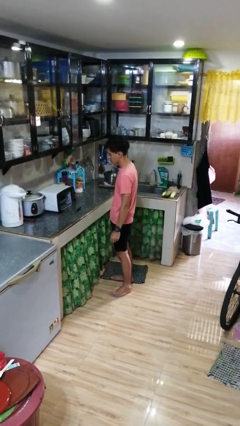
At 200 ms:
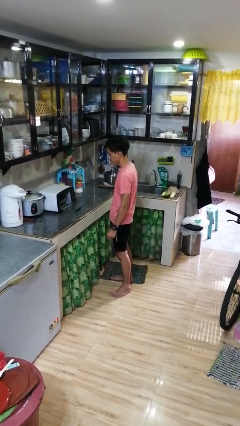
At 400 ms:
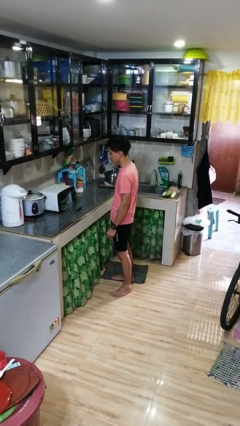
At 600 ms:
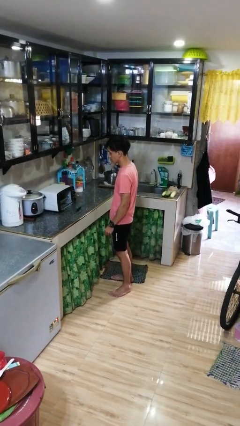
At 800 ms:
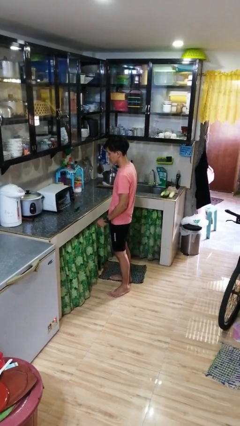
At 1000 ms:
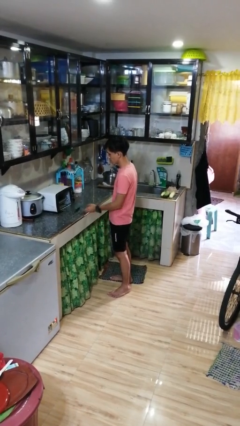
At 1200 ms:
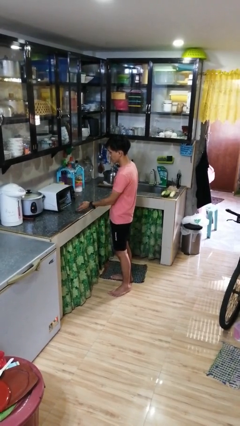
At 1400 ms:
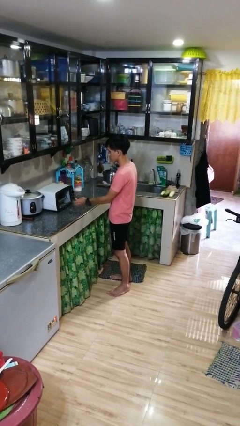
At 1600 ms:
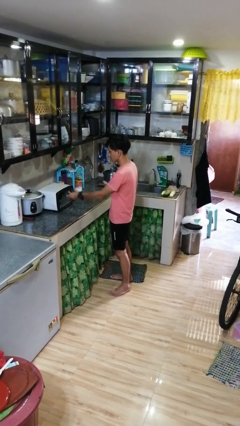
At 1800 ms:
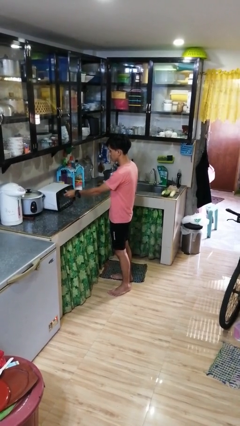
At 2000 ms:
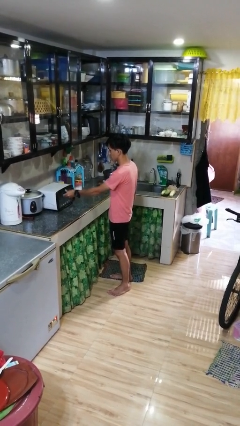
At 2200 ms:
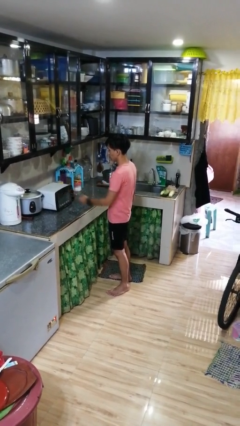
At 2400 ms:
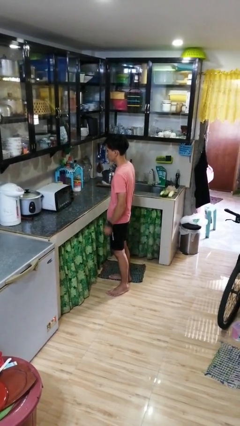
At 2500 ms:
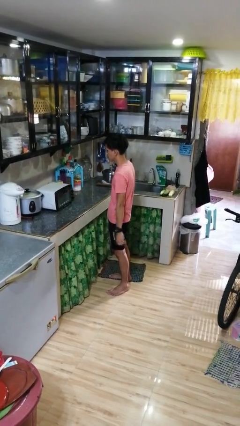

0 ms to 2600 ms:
person closes microwave

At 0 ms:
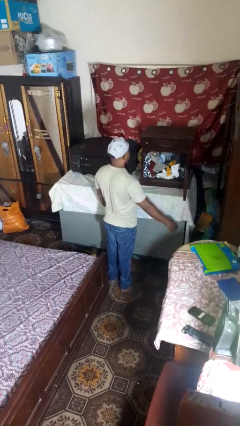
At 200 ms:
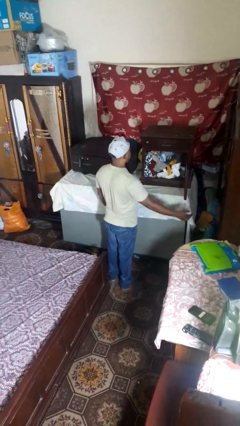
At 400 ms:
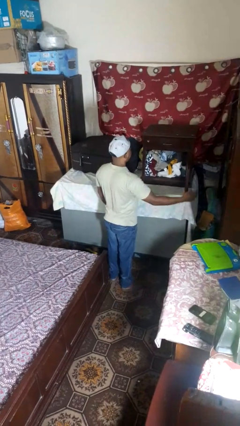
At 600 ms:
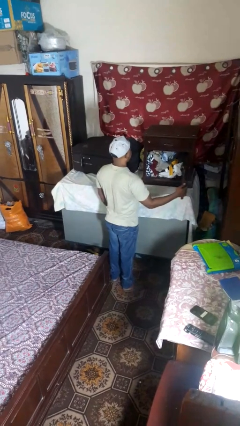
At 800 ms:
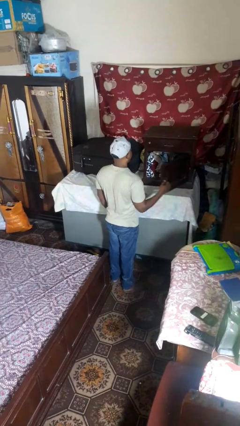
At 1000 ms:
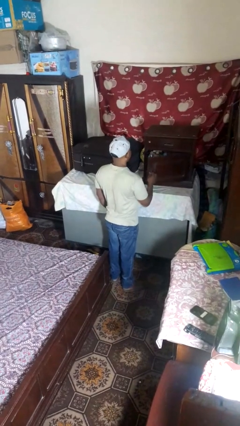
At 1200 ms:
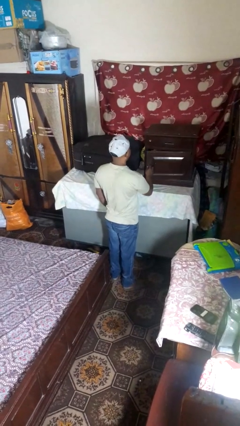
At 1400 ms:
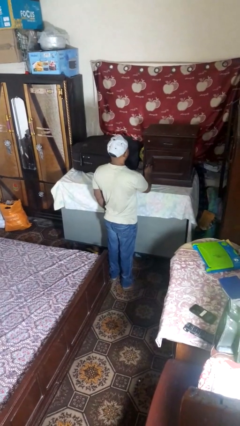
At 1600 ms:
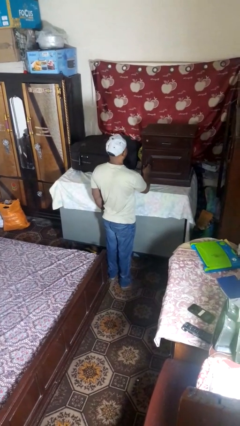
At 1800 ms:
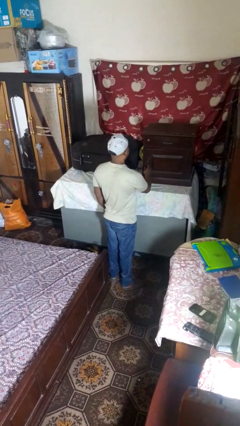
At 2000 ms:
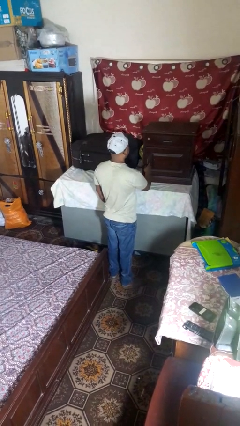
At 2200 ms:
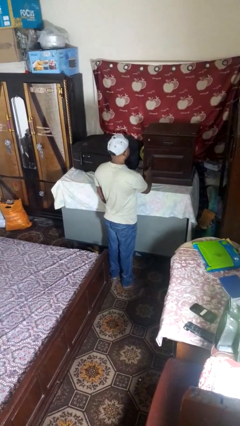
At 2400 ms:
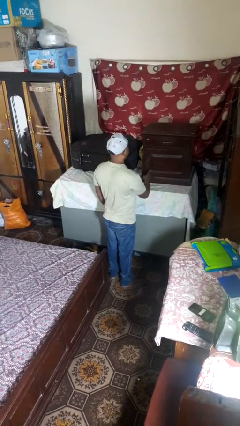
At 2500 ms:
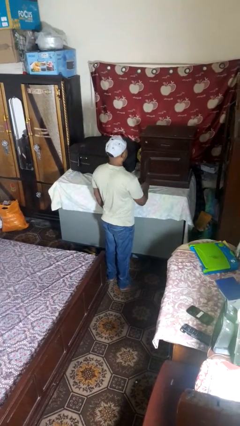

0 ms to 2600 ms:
person closes closet door

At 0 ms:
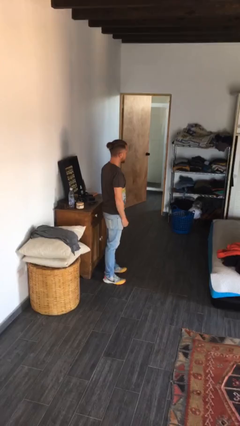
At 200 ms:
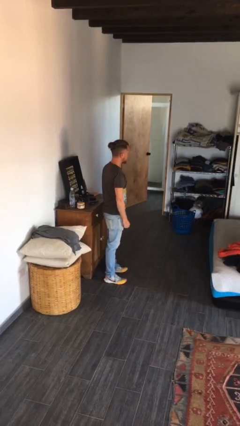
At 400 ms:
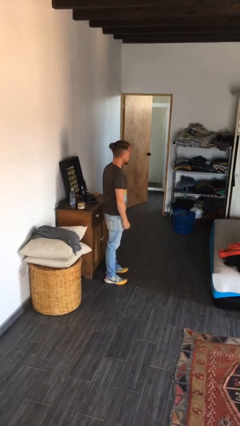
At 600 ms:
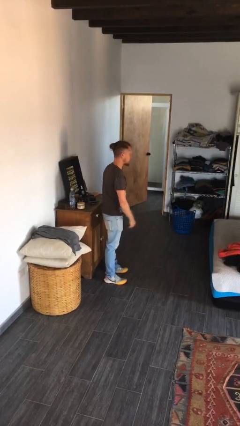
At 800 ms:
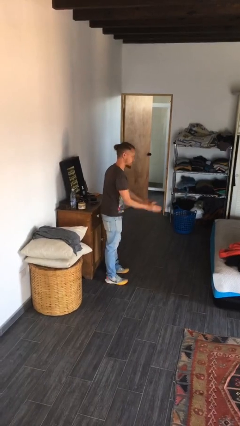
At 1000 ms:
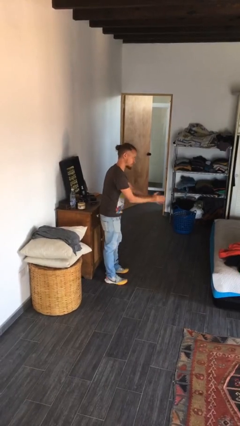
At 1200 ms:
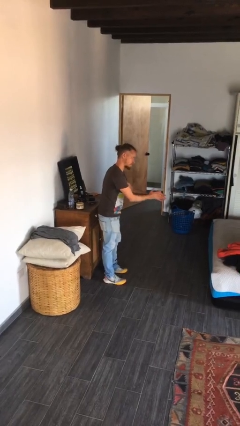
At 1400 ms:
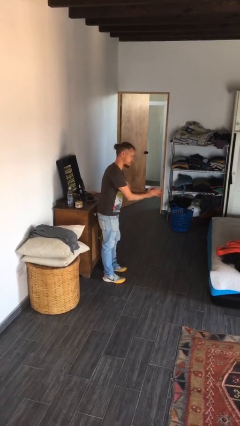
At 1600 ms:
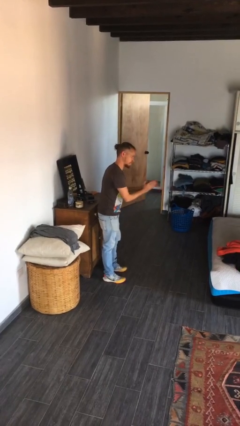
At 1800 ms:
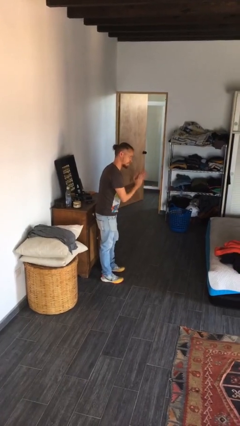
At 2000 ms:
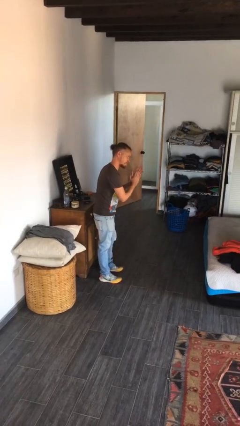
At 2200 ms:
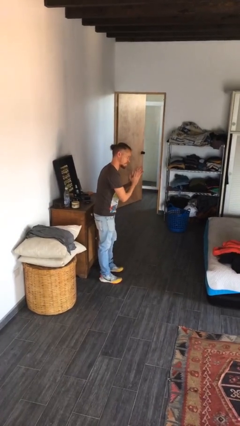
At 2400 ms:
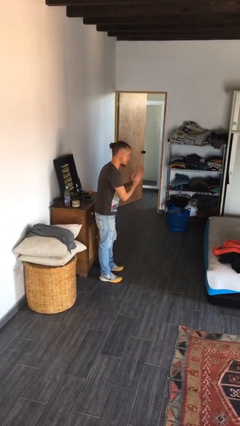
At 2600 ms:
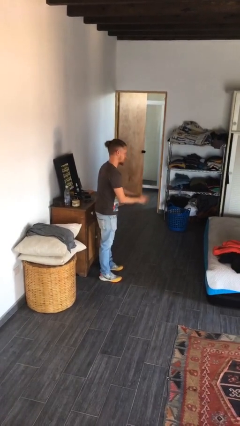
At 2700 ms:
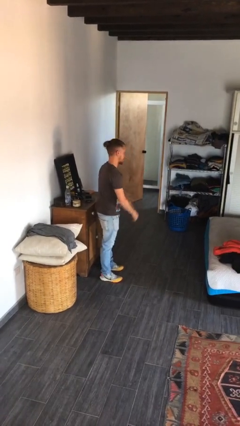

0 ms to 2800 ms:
person claps hands

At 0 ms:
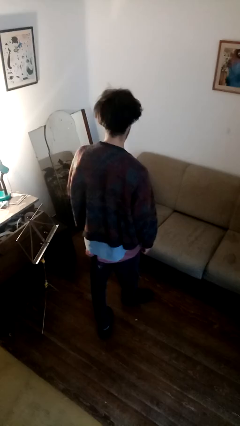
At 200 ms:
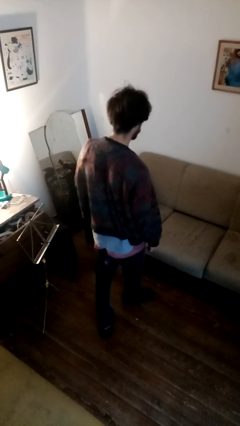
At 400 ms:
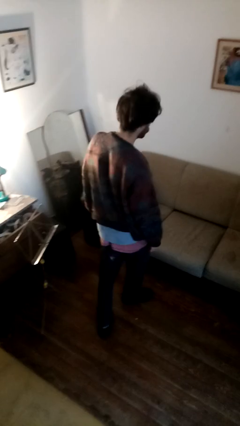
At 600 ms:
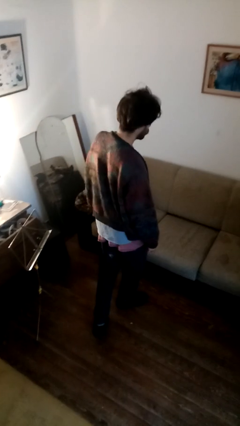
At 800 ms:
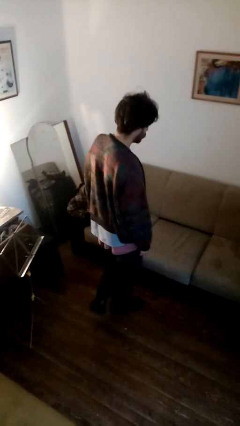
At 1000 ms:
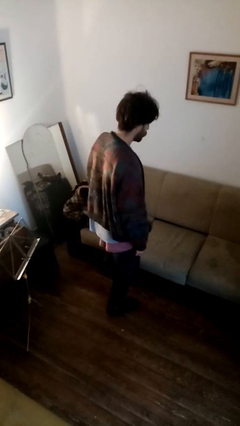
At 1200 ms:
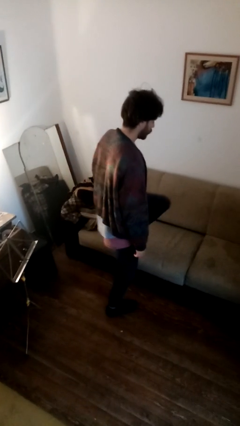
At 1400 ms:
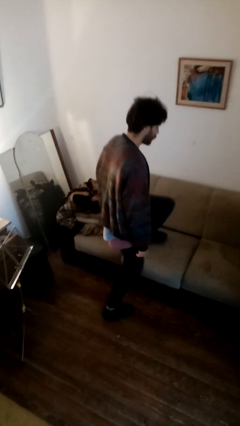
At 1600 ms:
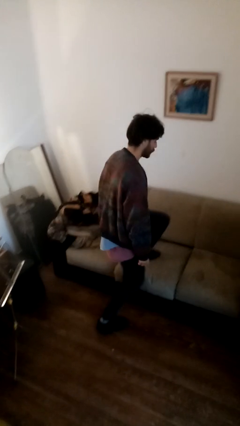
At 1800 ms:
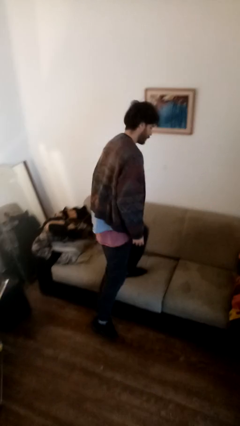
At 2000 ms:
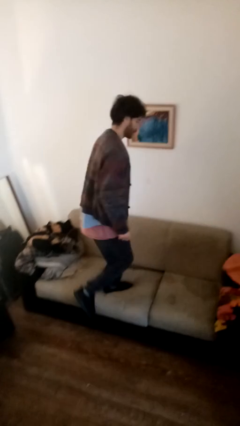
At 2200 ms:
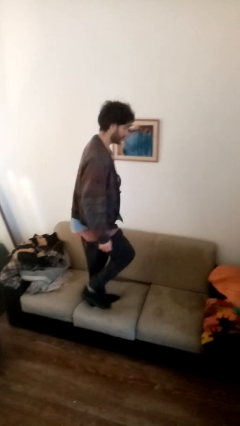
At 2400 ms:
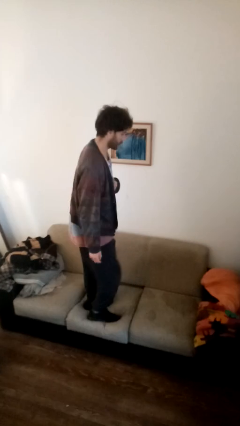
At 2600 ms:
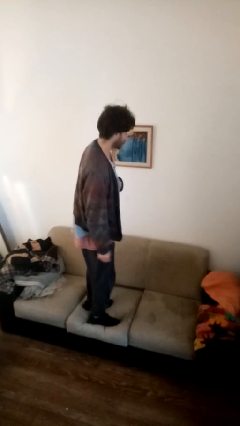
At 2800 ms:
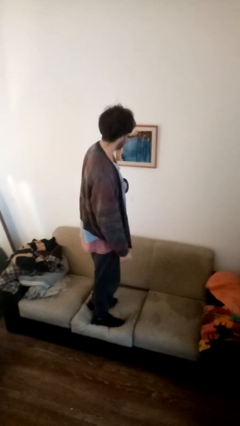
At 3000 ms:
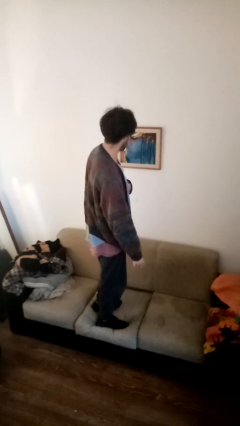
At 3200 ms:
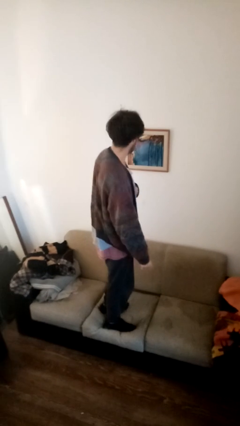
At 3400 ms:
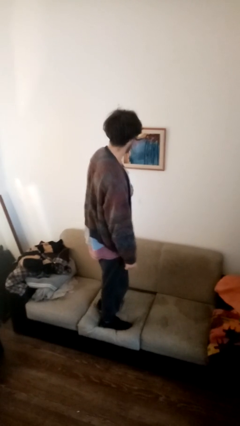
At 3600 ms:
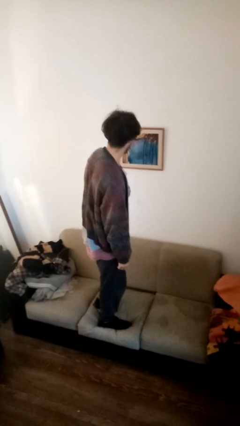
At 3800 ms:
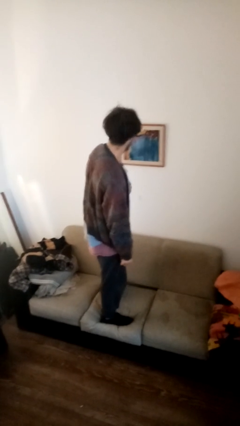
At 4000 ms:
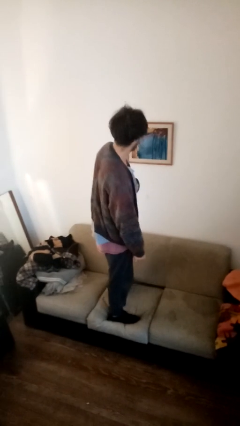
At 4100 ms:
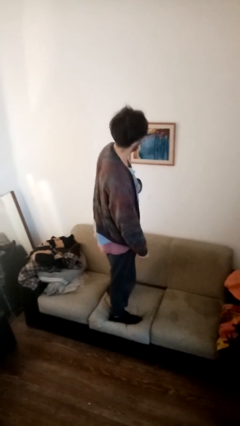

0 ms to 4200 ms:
person climbs on couch

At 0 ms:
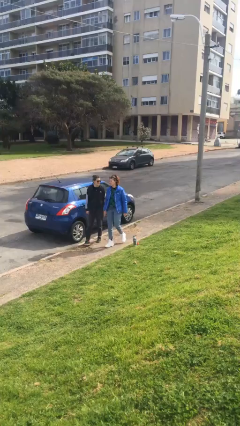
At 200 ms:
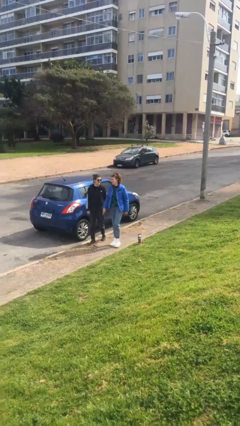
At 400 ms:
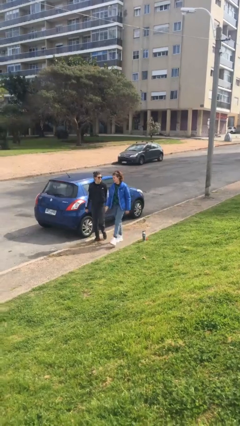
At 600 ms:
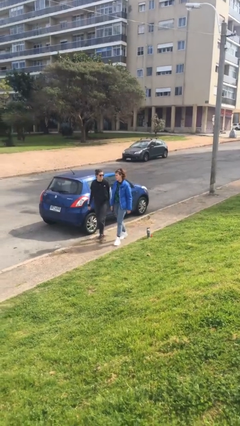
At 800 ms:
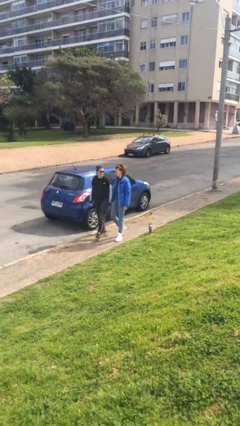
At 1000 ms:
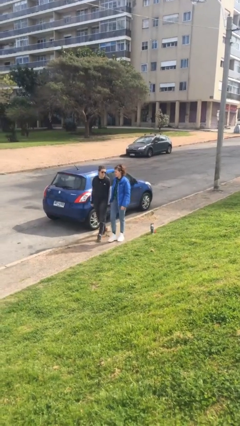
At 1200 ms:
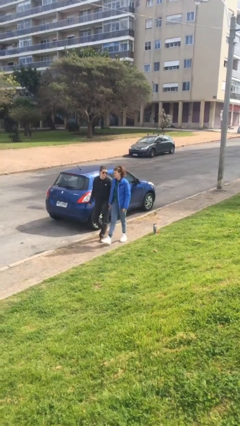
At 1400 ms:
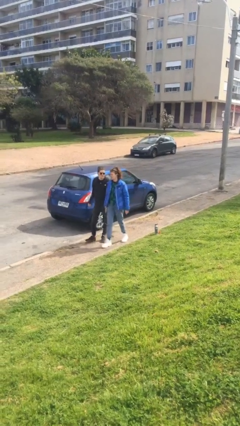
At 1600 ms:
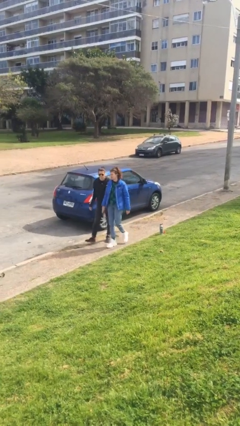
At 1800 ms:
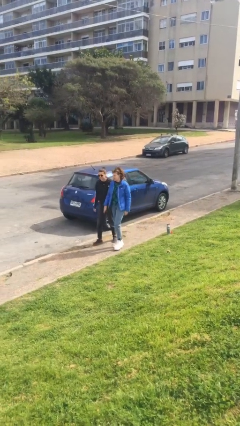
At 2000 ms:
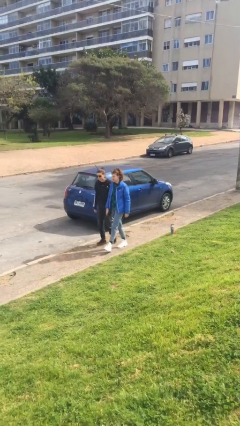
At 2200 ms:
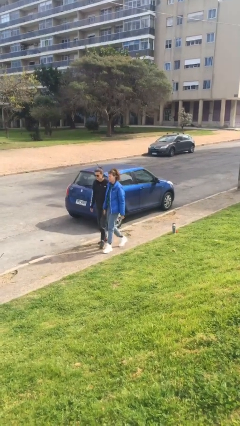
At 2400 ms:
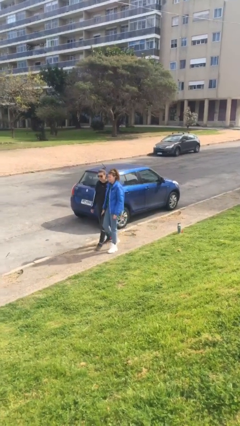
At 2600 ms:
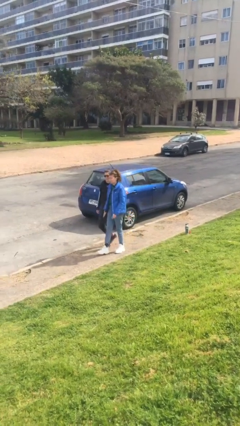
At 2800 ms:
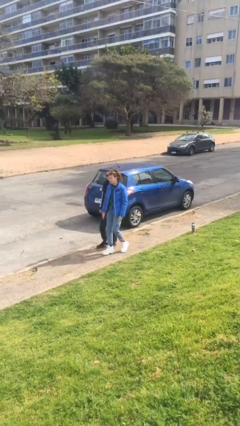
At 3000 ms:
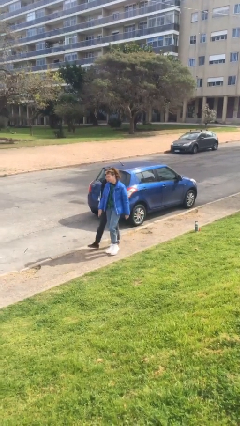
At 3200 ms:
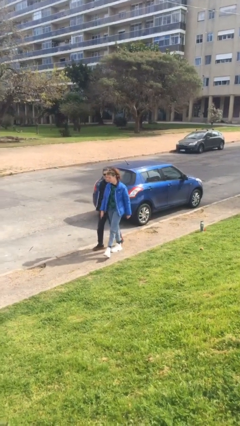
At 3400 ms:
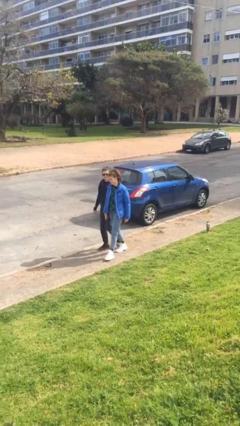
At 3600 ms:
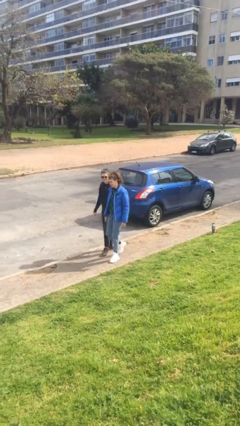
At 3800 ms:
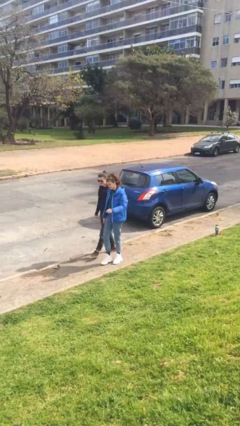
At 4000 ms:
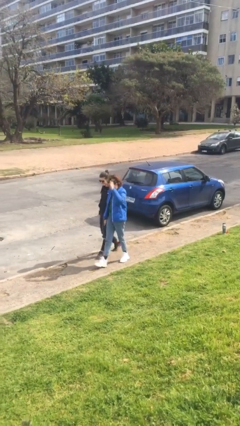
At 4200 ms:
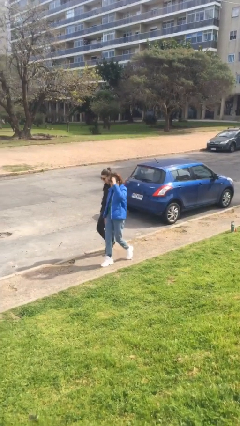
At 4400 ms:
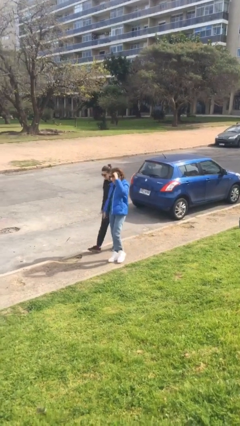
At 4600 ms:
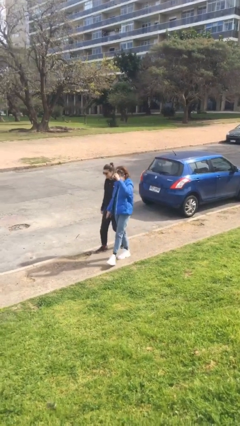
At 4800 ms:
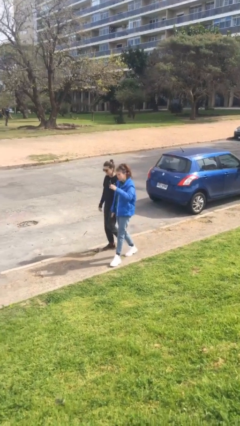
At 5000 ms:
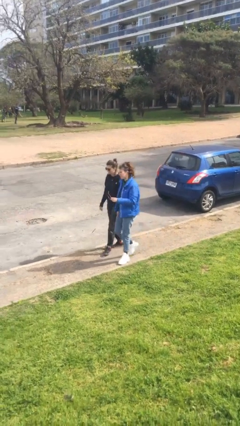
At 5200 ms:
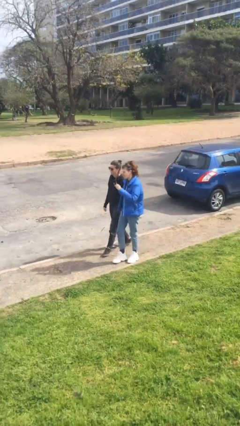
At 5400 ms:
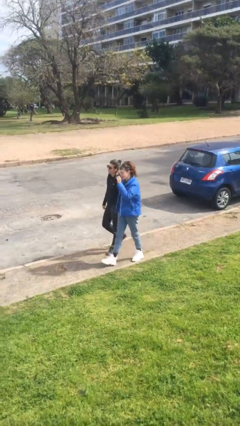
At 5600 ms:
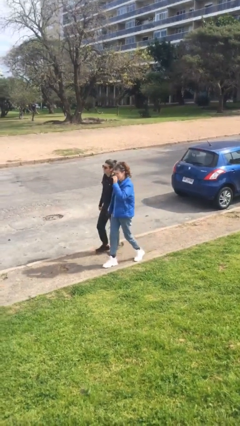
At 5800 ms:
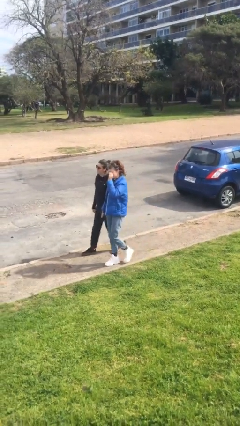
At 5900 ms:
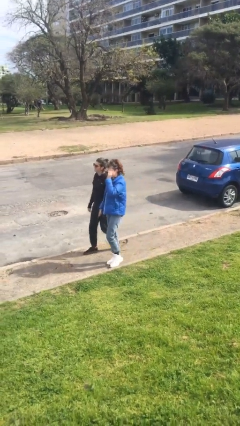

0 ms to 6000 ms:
person talks to person
